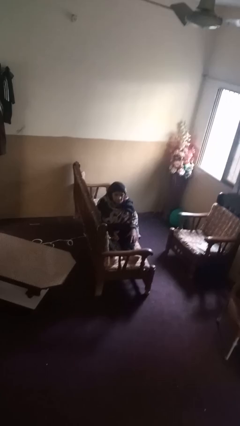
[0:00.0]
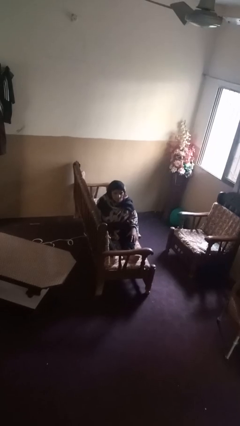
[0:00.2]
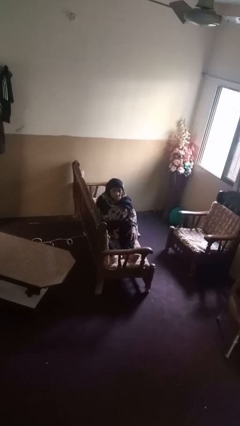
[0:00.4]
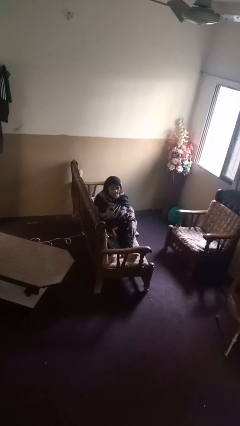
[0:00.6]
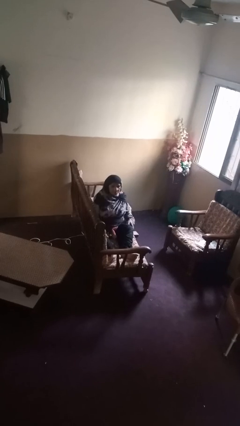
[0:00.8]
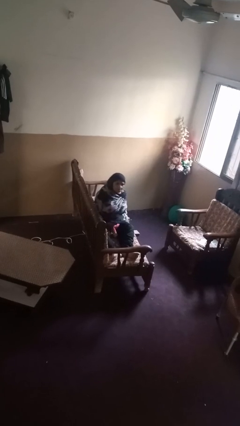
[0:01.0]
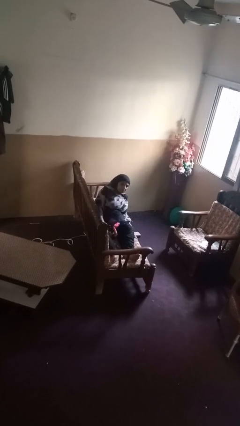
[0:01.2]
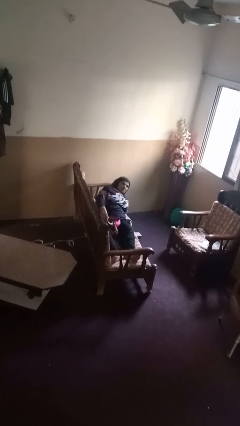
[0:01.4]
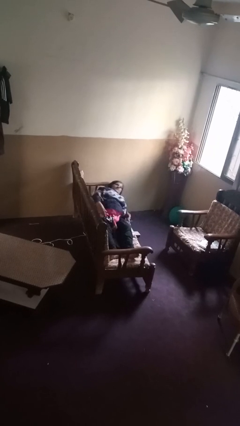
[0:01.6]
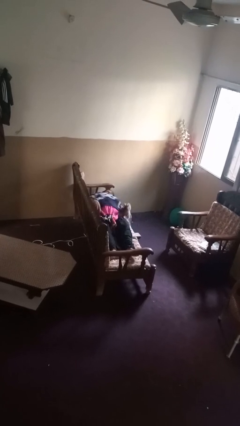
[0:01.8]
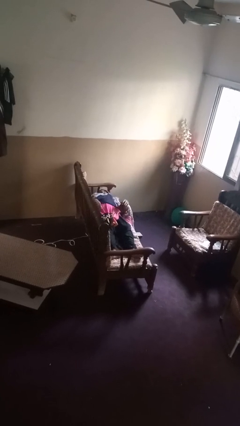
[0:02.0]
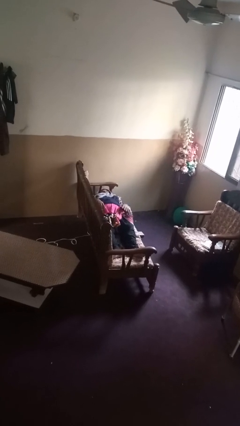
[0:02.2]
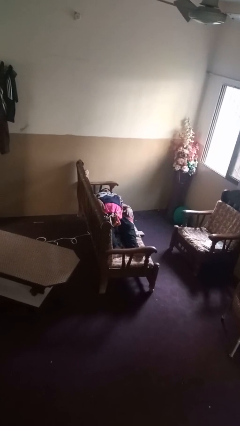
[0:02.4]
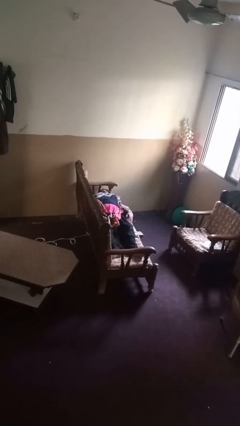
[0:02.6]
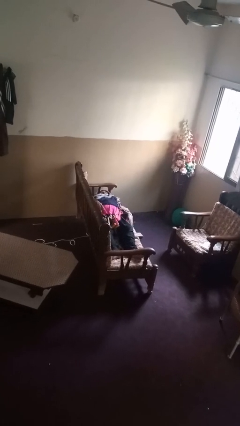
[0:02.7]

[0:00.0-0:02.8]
person lies down on couch

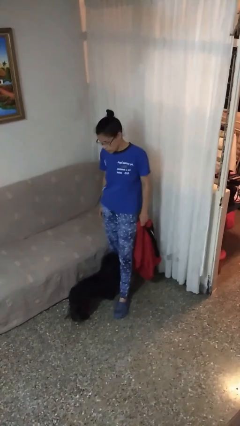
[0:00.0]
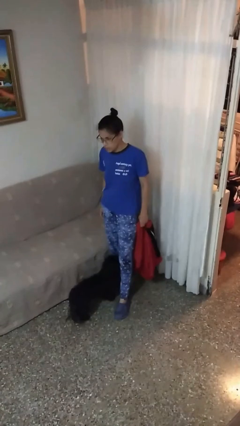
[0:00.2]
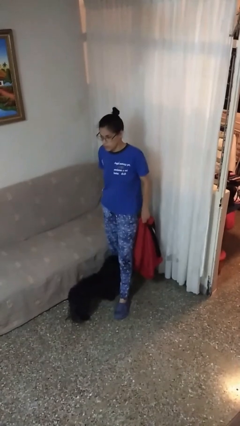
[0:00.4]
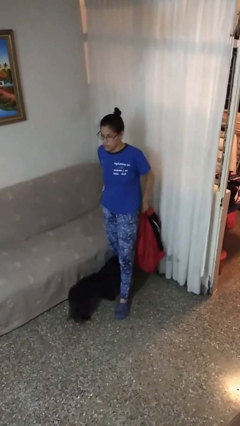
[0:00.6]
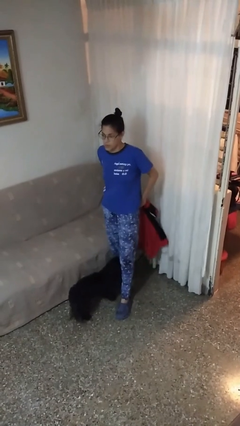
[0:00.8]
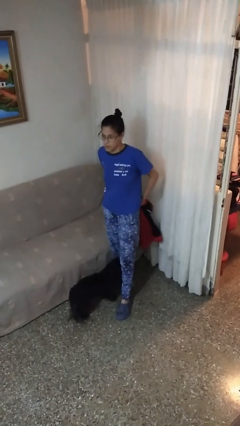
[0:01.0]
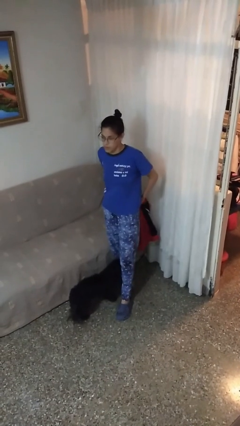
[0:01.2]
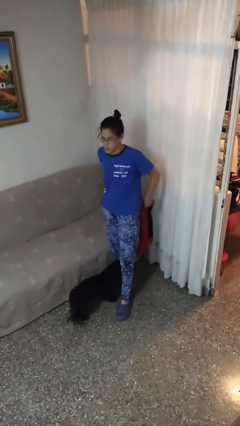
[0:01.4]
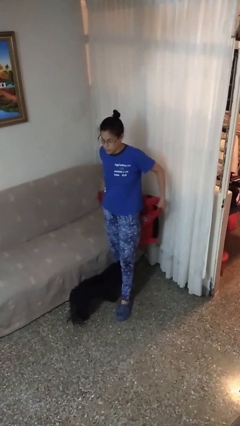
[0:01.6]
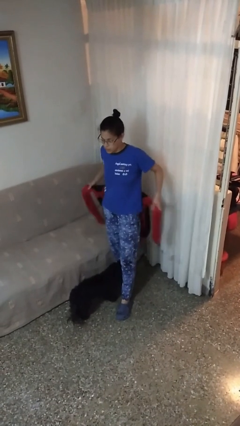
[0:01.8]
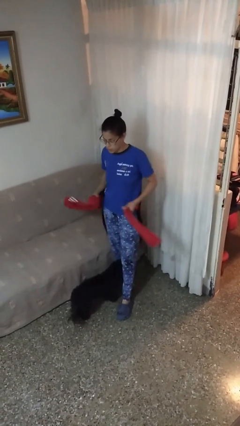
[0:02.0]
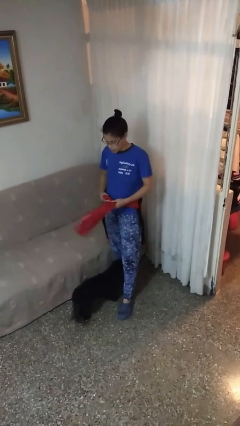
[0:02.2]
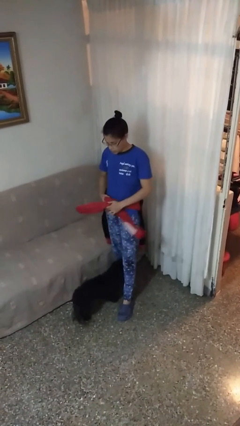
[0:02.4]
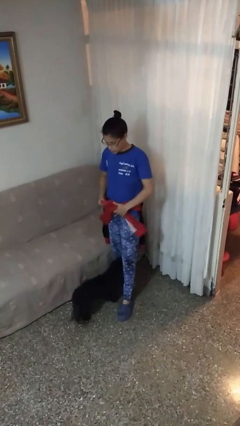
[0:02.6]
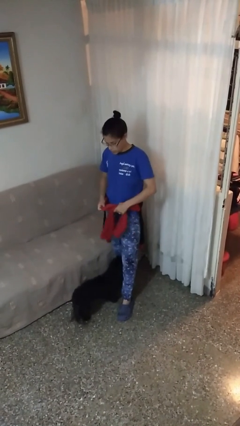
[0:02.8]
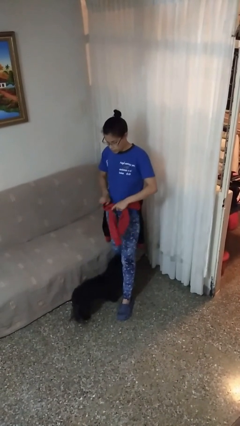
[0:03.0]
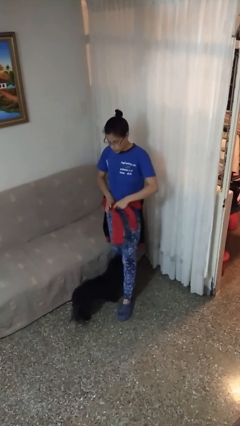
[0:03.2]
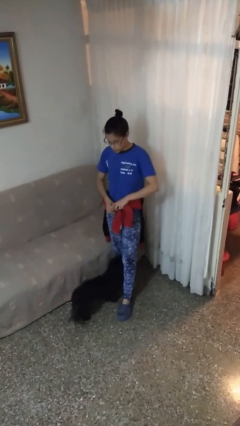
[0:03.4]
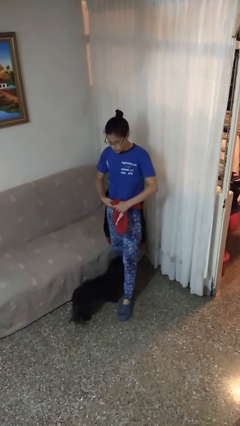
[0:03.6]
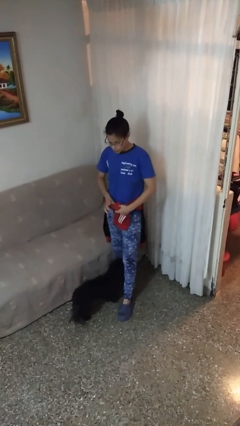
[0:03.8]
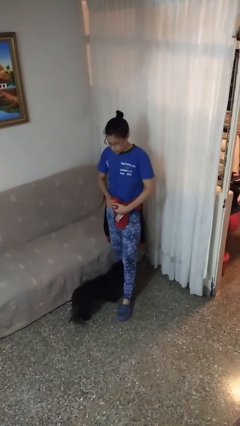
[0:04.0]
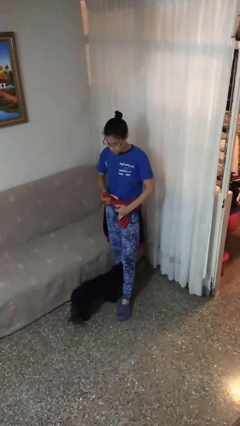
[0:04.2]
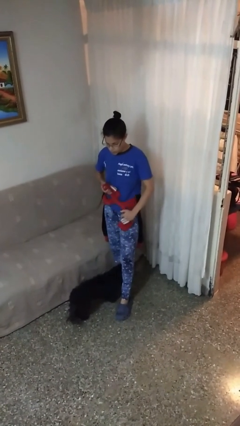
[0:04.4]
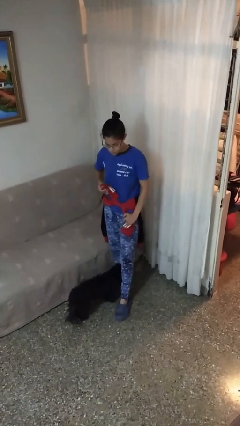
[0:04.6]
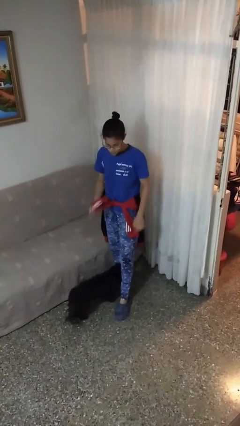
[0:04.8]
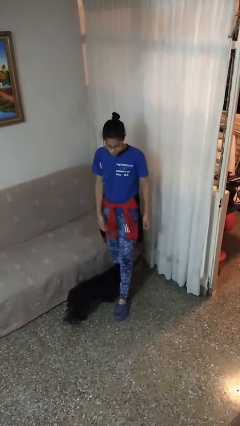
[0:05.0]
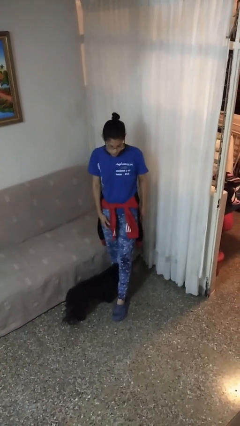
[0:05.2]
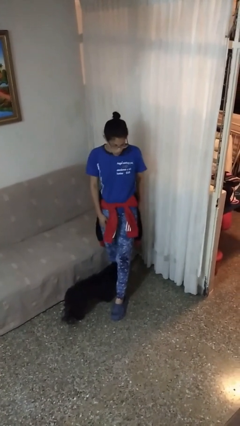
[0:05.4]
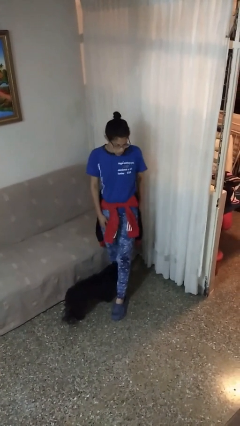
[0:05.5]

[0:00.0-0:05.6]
person ties jacket around waist

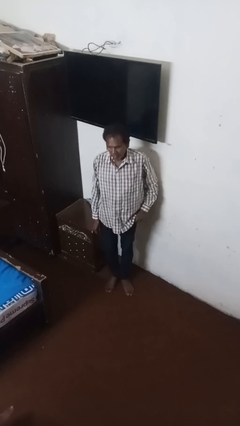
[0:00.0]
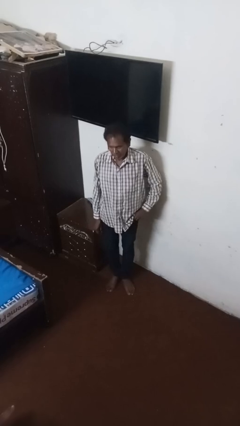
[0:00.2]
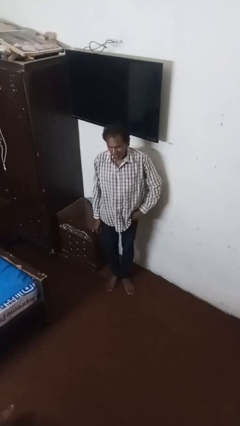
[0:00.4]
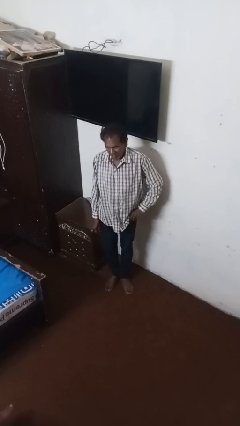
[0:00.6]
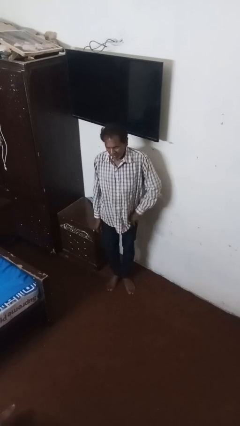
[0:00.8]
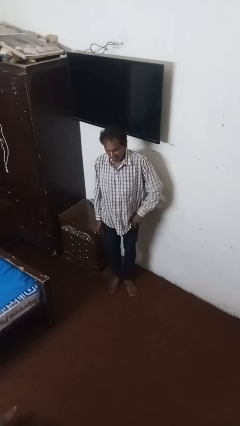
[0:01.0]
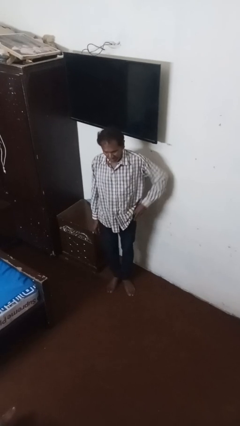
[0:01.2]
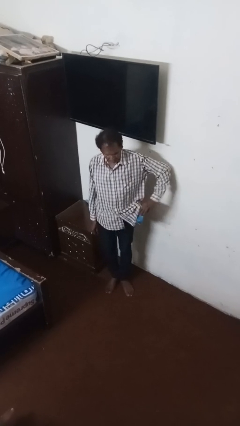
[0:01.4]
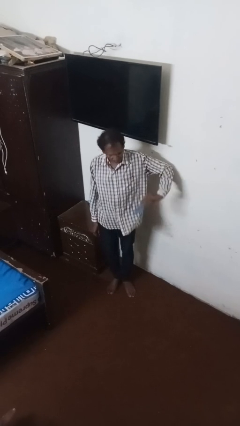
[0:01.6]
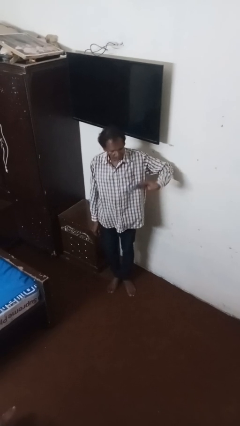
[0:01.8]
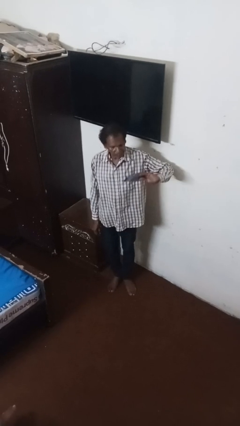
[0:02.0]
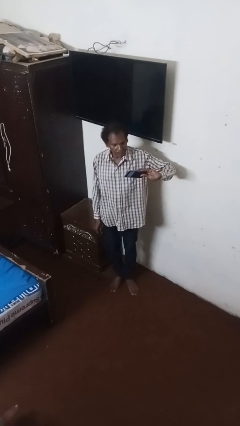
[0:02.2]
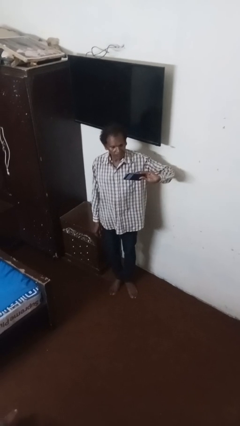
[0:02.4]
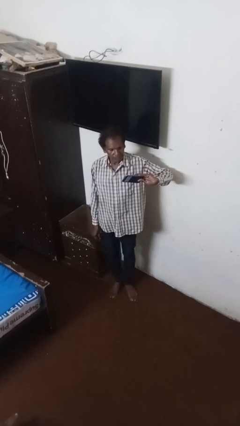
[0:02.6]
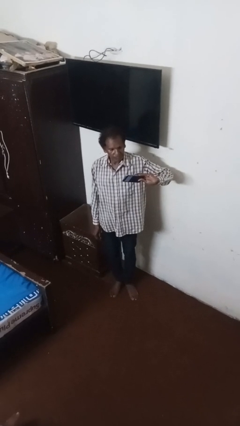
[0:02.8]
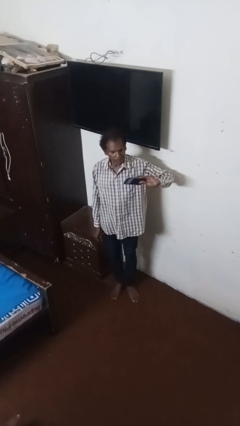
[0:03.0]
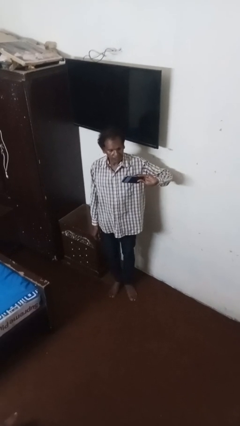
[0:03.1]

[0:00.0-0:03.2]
person takes phone from pocket

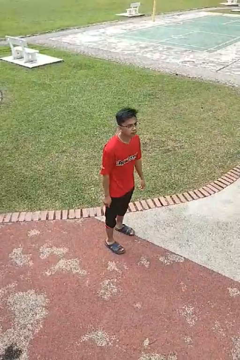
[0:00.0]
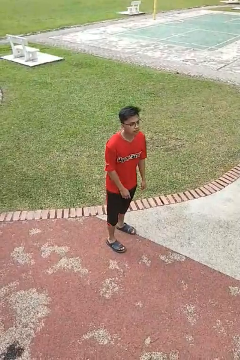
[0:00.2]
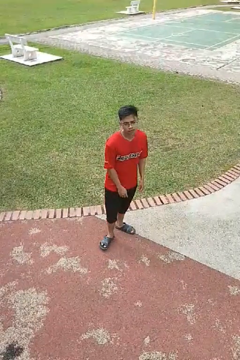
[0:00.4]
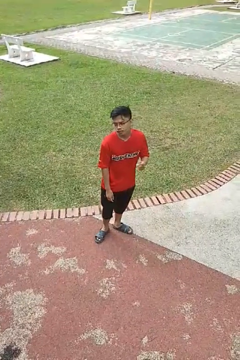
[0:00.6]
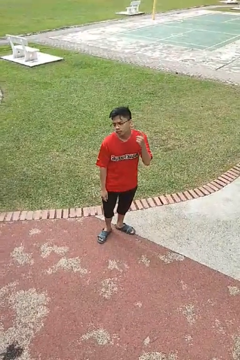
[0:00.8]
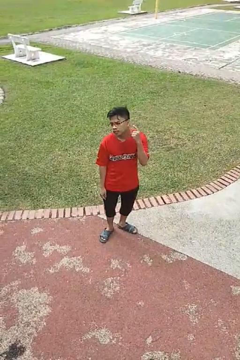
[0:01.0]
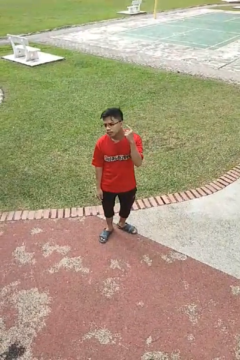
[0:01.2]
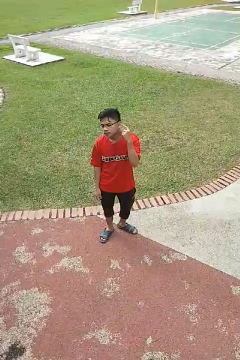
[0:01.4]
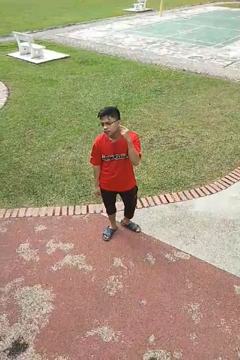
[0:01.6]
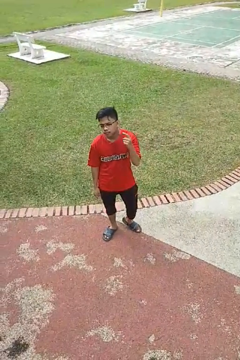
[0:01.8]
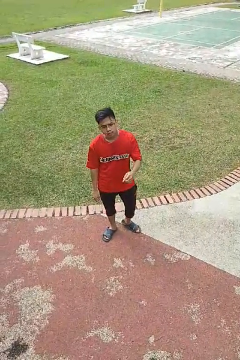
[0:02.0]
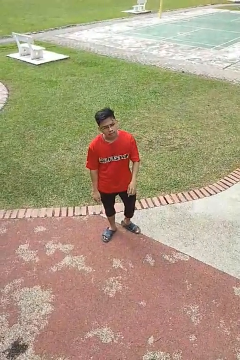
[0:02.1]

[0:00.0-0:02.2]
person gestures listen closely

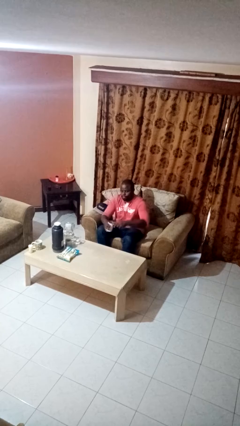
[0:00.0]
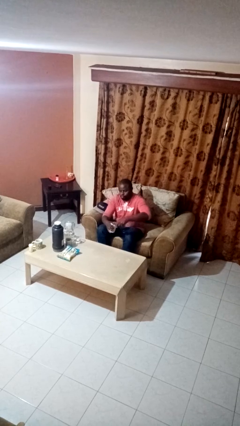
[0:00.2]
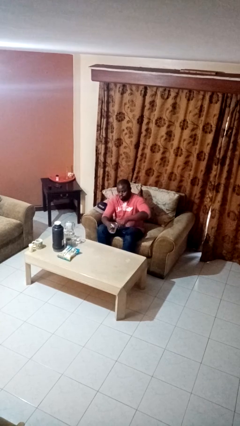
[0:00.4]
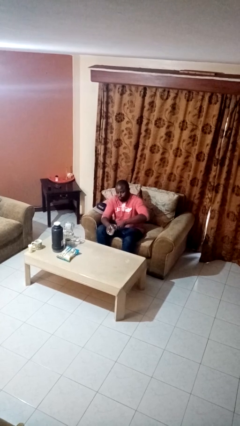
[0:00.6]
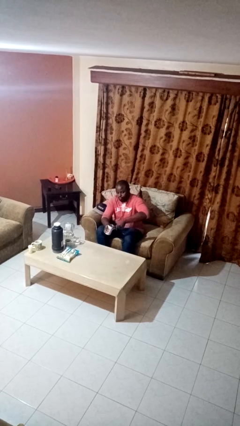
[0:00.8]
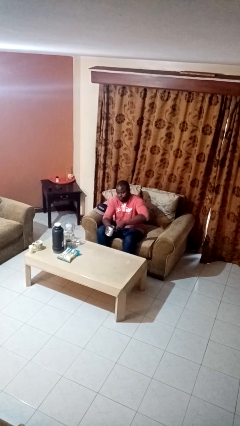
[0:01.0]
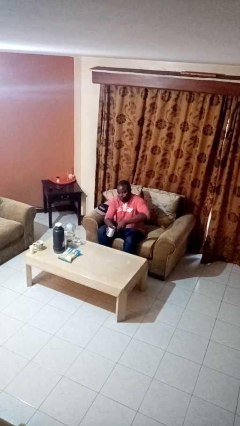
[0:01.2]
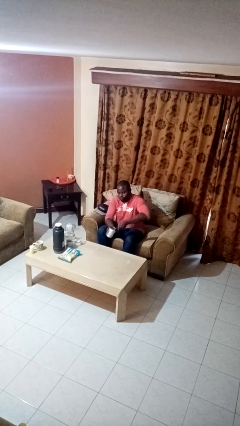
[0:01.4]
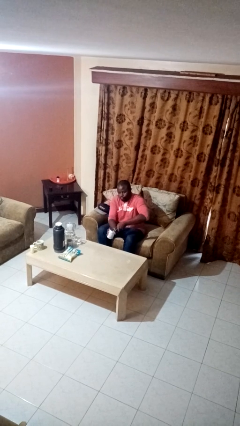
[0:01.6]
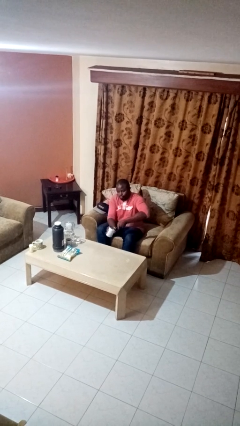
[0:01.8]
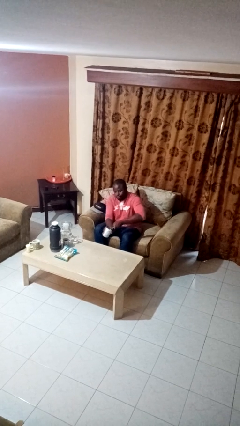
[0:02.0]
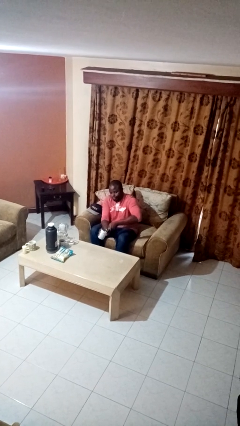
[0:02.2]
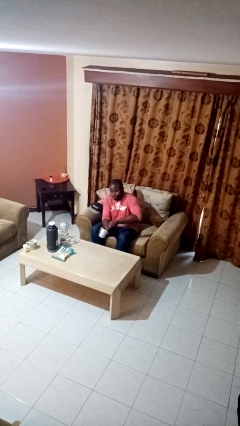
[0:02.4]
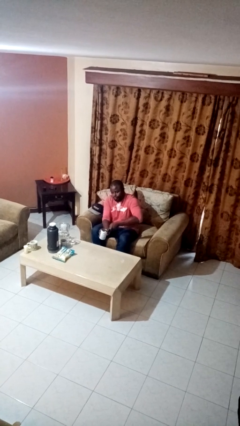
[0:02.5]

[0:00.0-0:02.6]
person opens can with can opener

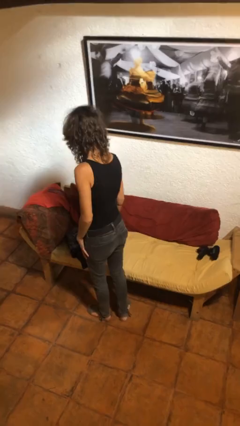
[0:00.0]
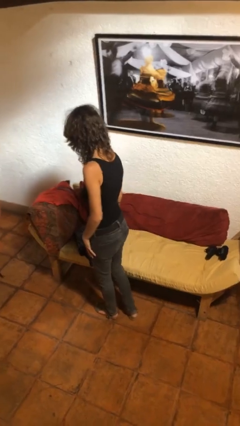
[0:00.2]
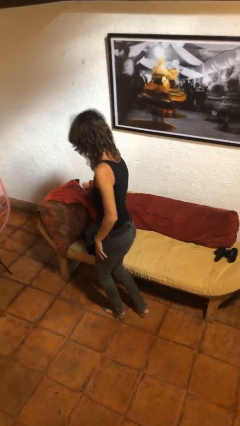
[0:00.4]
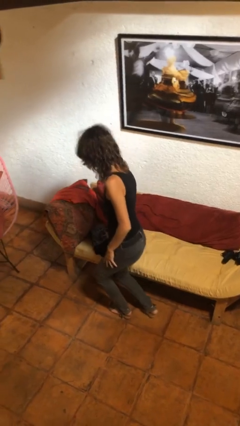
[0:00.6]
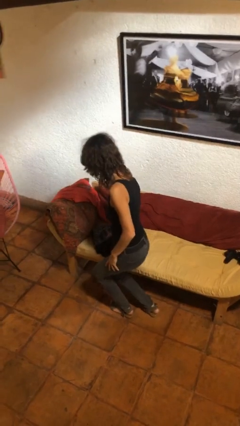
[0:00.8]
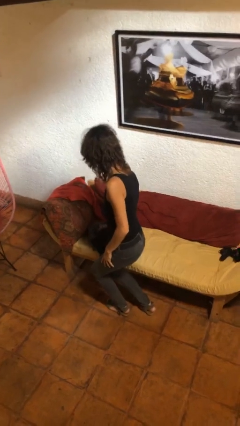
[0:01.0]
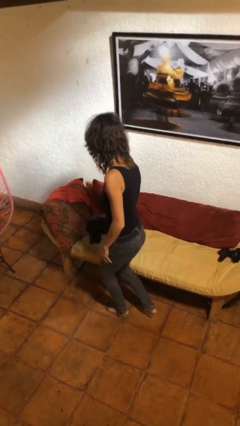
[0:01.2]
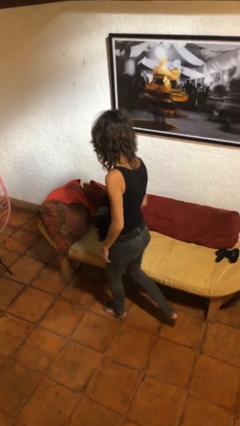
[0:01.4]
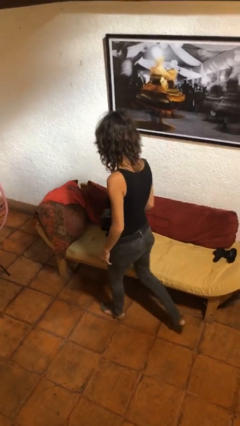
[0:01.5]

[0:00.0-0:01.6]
person picks up object from couch
